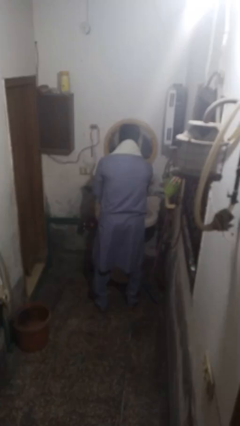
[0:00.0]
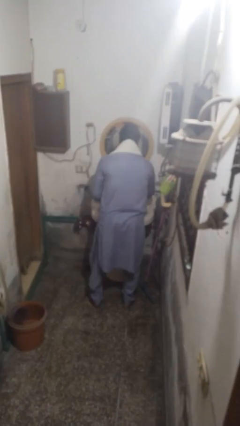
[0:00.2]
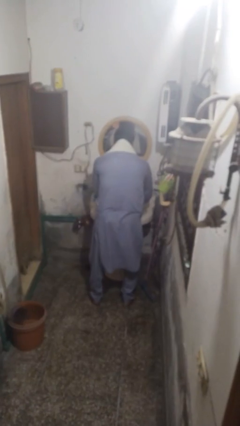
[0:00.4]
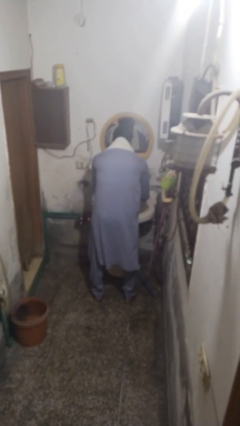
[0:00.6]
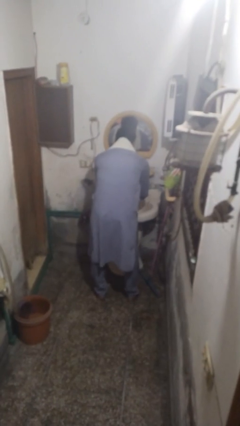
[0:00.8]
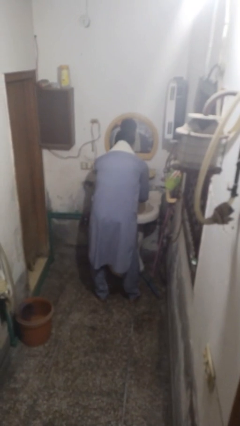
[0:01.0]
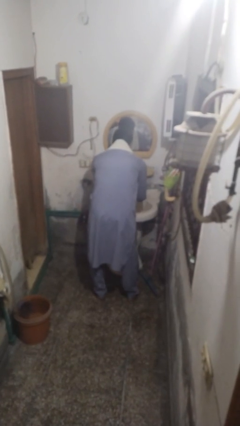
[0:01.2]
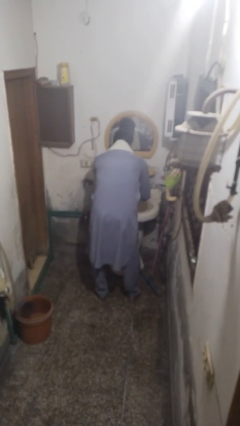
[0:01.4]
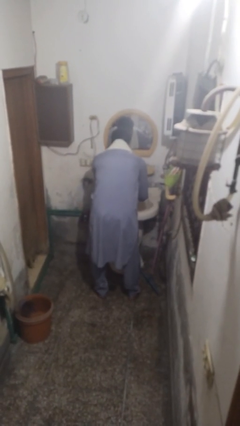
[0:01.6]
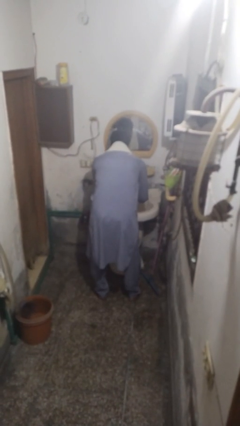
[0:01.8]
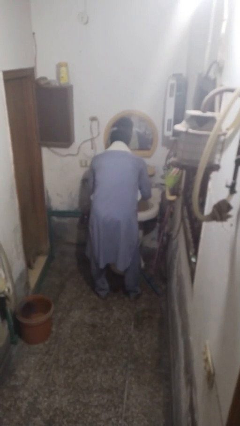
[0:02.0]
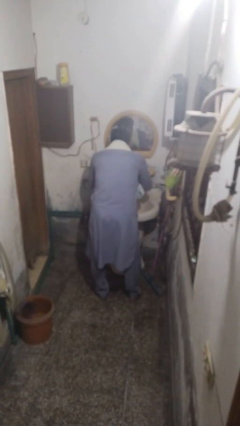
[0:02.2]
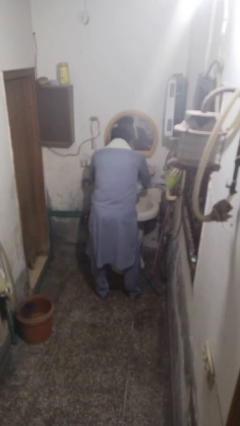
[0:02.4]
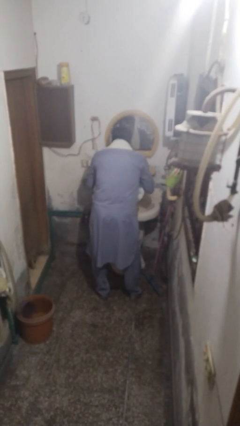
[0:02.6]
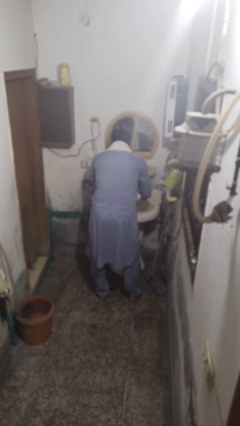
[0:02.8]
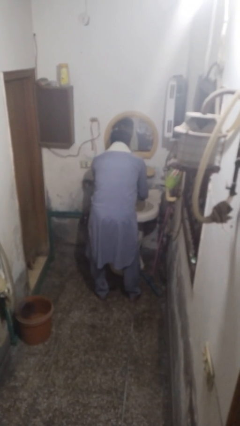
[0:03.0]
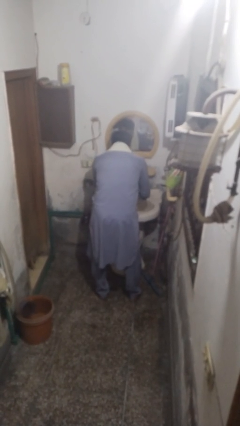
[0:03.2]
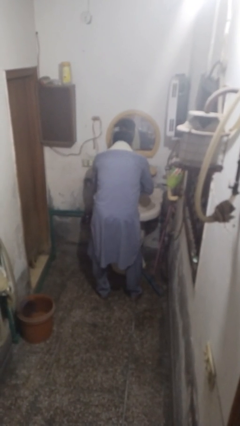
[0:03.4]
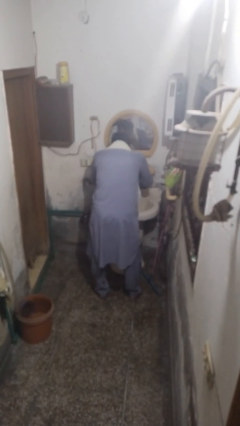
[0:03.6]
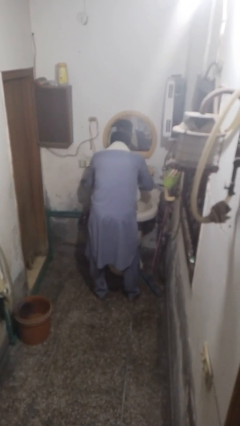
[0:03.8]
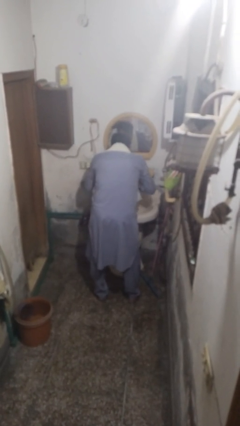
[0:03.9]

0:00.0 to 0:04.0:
person washes face

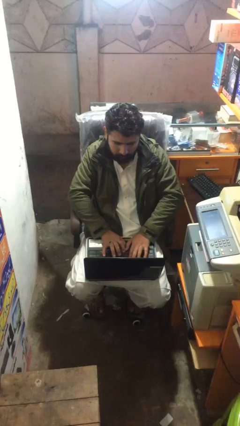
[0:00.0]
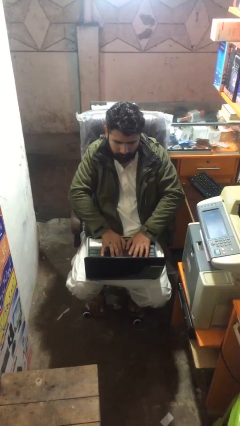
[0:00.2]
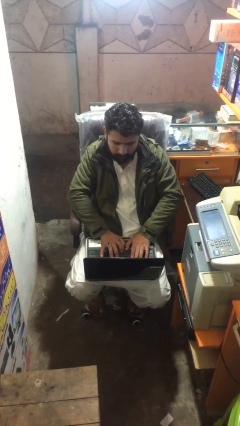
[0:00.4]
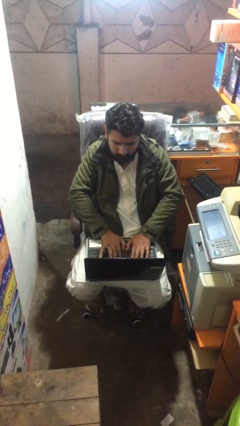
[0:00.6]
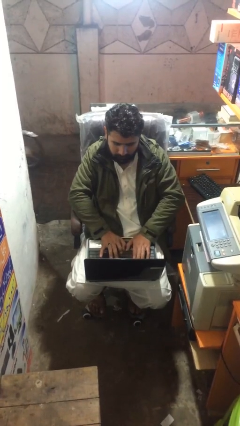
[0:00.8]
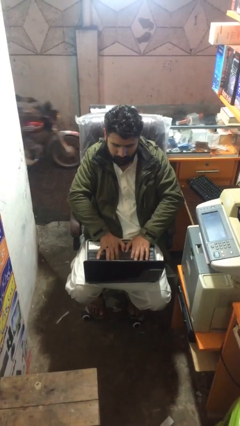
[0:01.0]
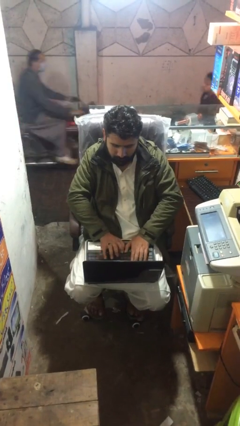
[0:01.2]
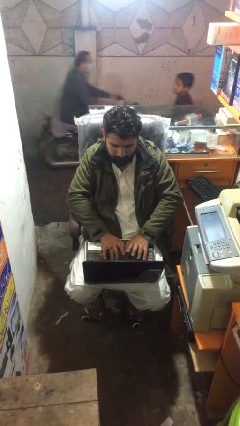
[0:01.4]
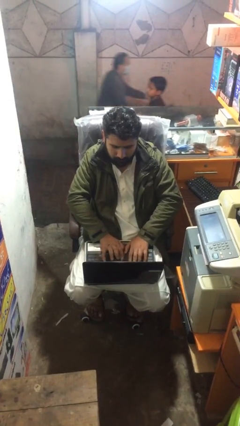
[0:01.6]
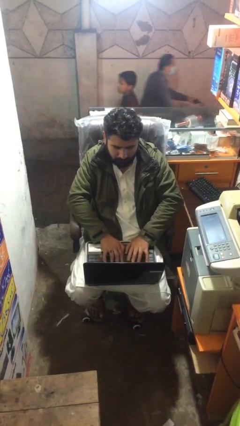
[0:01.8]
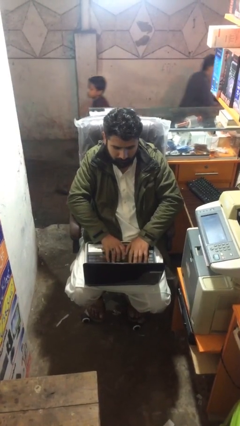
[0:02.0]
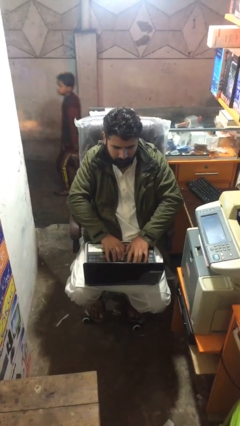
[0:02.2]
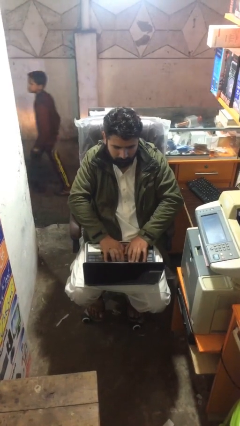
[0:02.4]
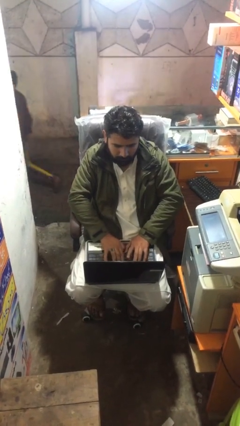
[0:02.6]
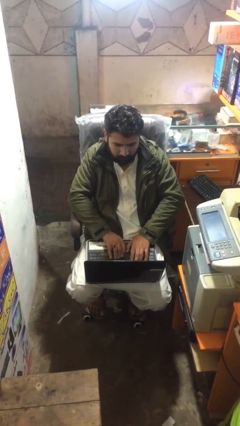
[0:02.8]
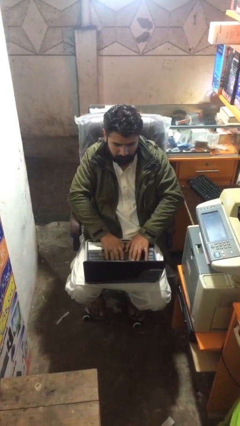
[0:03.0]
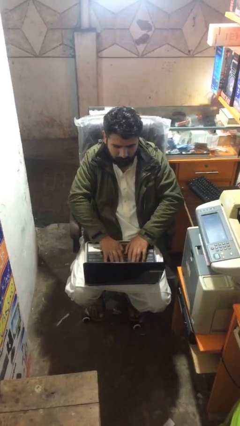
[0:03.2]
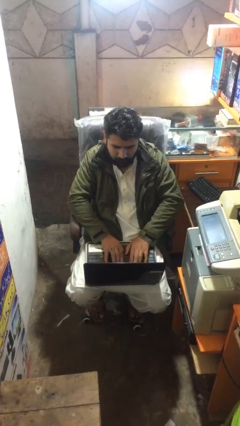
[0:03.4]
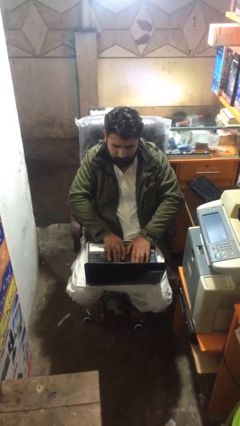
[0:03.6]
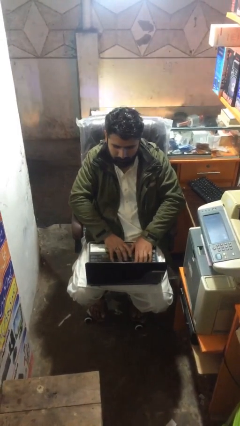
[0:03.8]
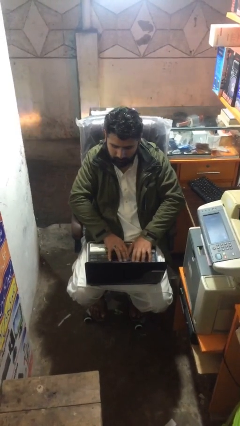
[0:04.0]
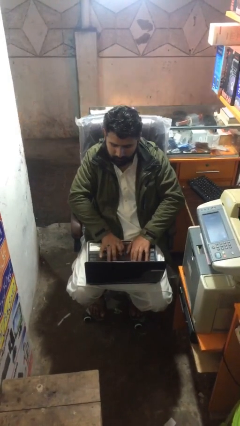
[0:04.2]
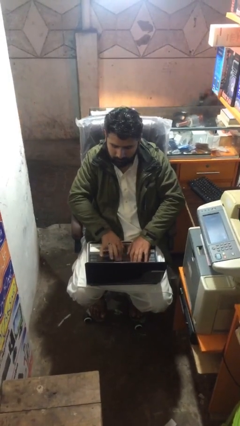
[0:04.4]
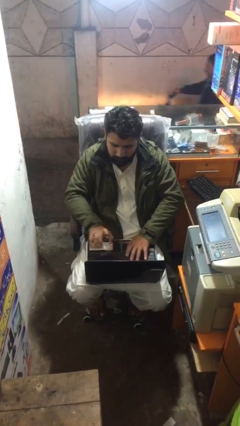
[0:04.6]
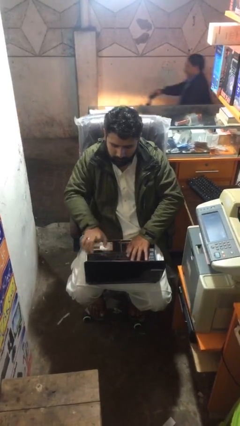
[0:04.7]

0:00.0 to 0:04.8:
person interacts with laptop

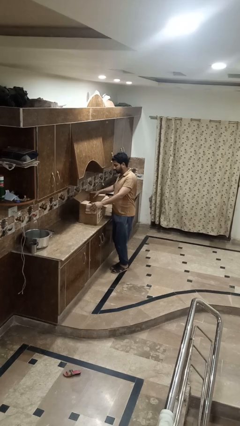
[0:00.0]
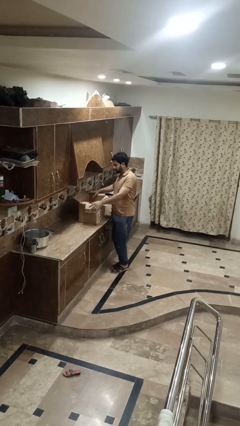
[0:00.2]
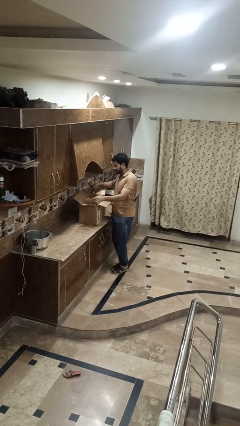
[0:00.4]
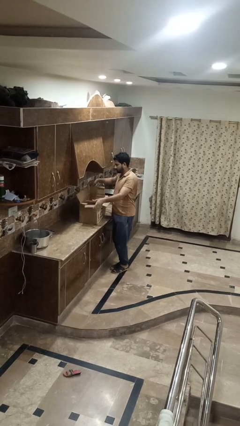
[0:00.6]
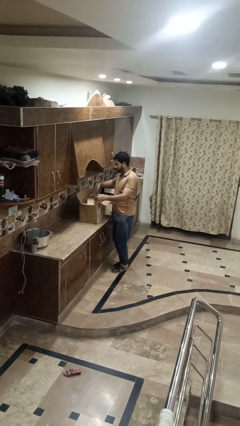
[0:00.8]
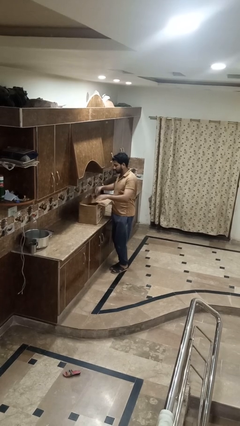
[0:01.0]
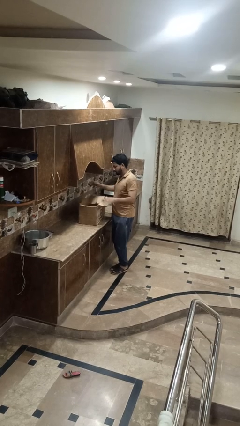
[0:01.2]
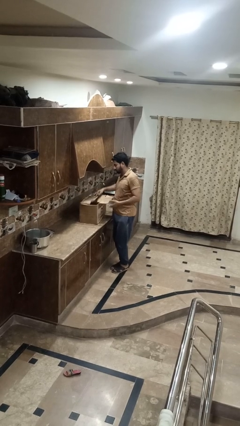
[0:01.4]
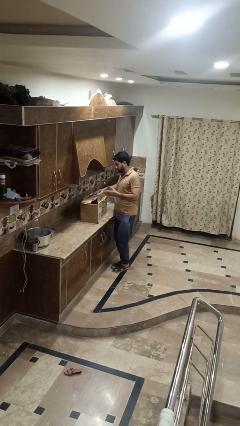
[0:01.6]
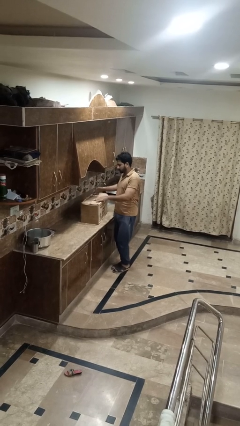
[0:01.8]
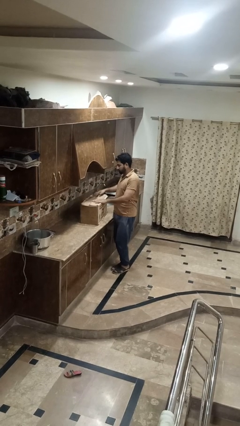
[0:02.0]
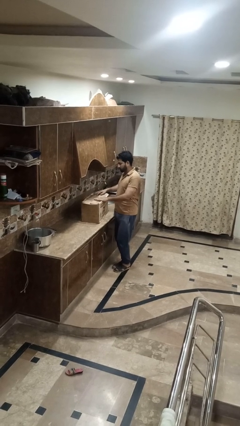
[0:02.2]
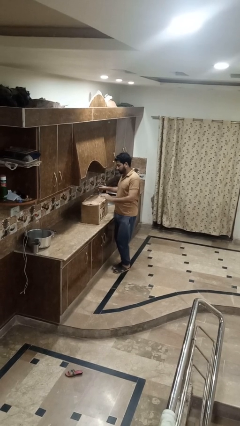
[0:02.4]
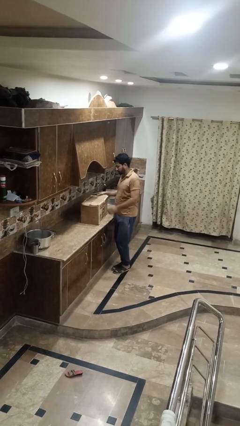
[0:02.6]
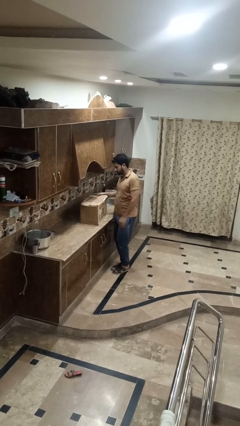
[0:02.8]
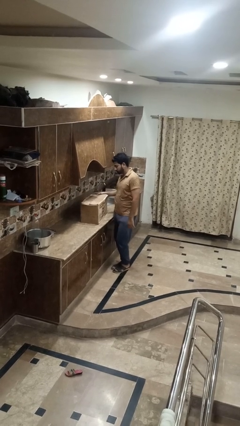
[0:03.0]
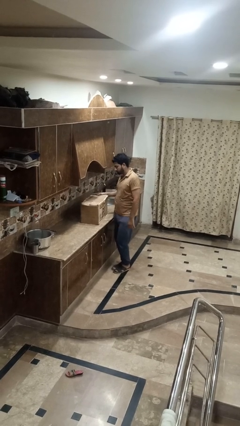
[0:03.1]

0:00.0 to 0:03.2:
person closes box

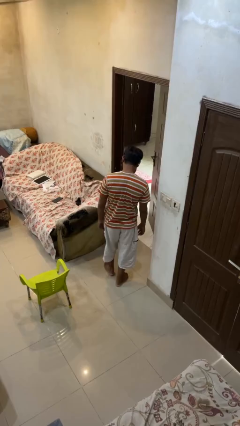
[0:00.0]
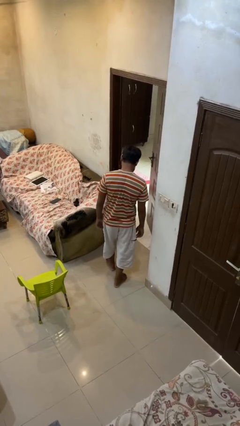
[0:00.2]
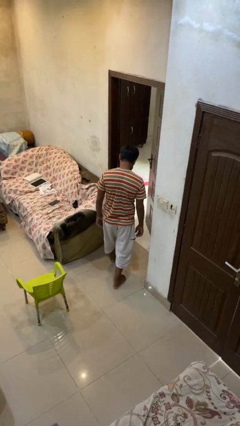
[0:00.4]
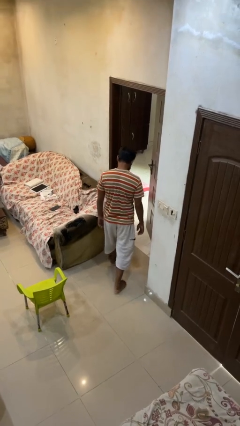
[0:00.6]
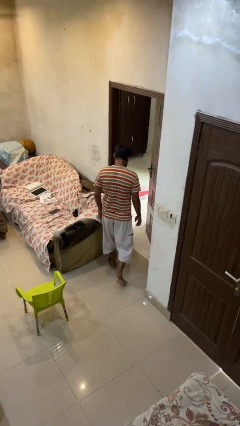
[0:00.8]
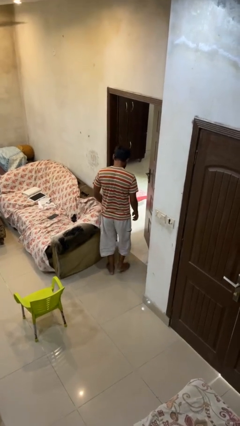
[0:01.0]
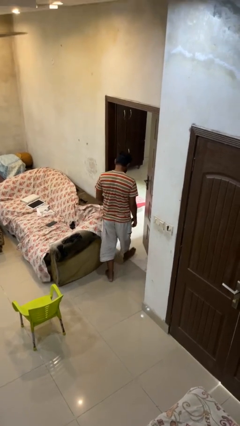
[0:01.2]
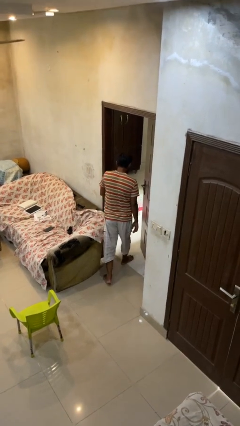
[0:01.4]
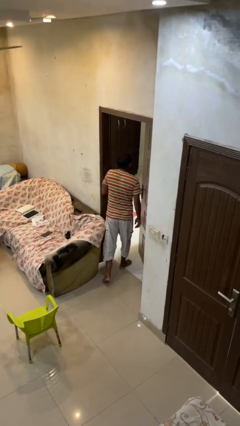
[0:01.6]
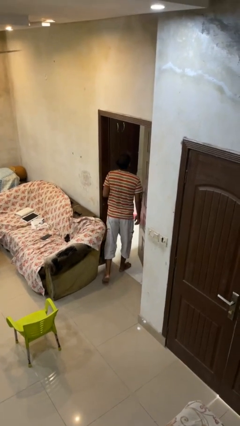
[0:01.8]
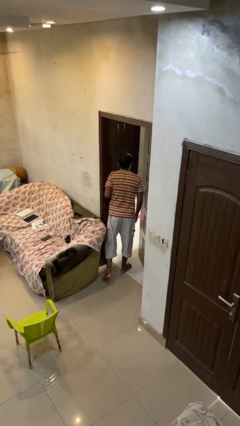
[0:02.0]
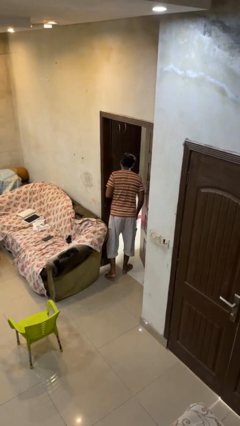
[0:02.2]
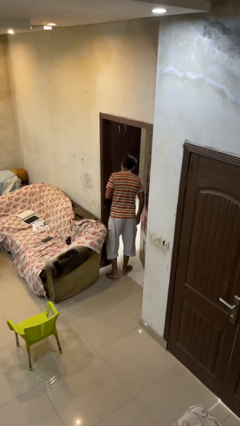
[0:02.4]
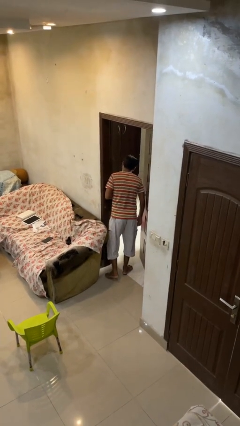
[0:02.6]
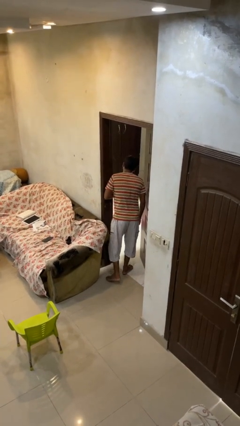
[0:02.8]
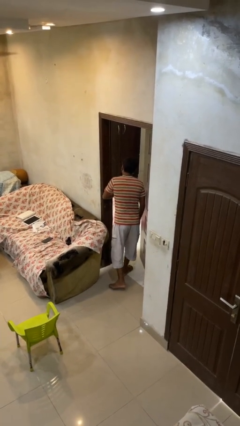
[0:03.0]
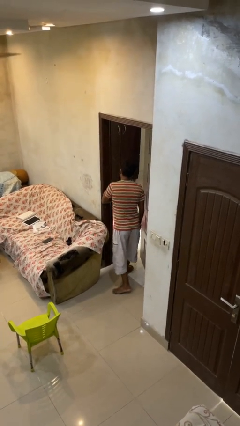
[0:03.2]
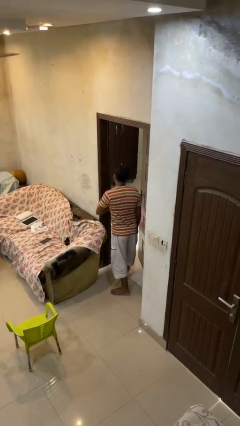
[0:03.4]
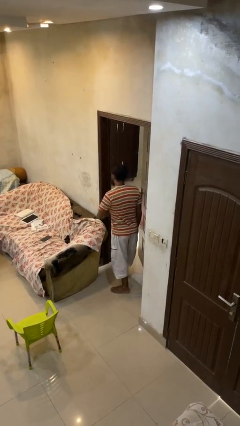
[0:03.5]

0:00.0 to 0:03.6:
person bumps into wall

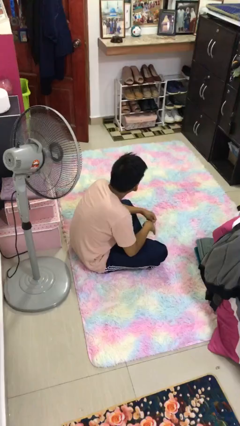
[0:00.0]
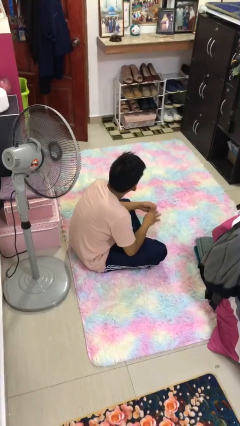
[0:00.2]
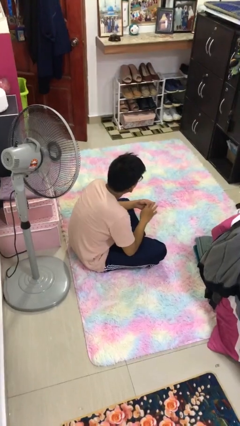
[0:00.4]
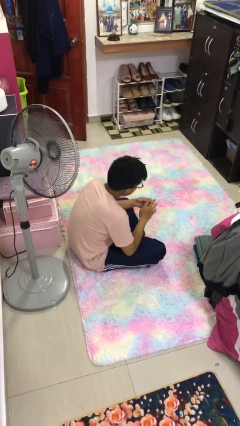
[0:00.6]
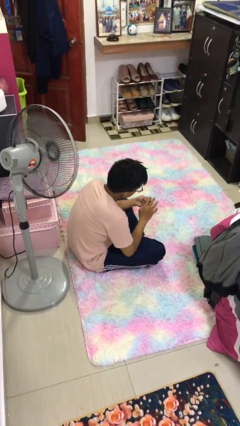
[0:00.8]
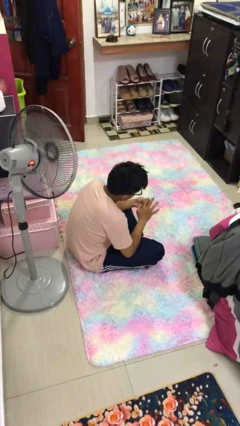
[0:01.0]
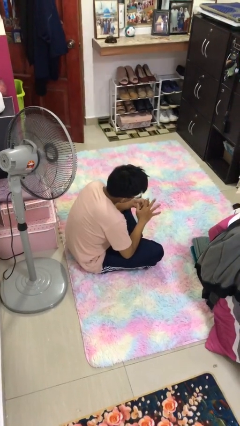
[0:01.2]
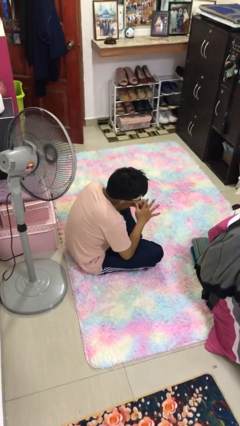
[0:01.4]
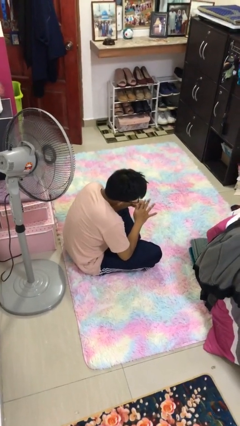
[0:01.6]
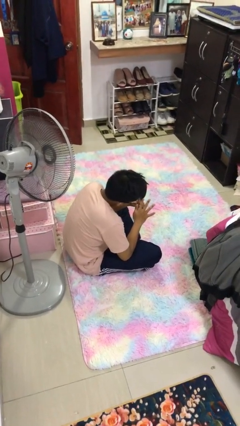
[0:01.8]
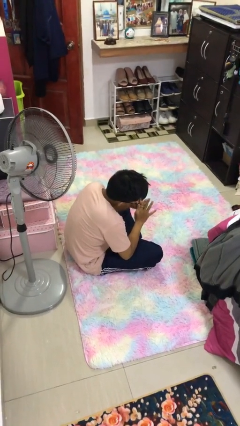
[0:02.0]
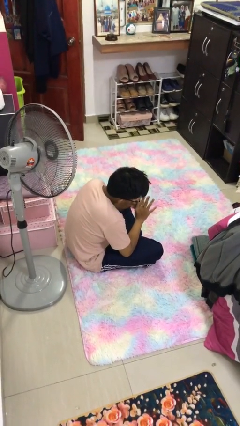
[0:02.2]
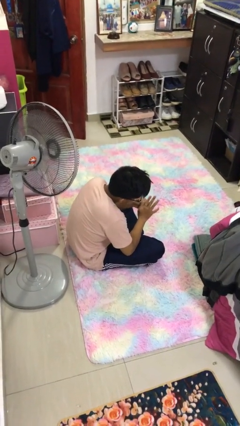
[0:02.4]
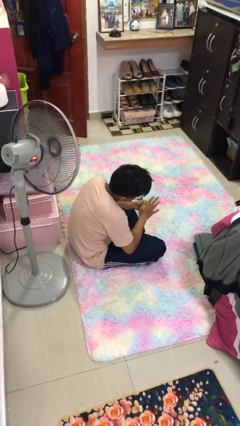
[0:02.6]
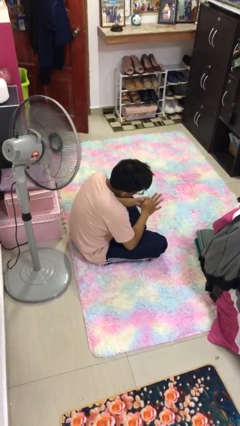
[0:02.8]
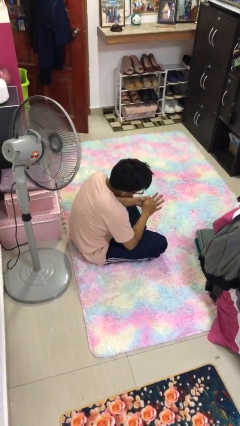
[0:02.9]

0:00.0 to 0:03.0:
person puts on ring
